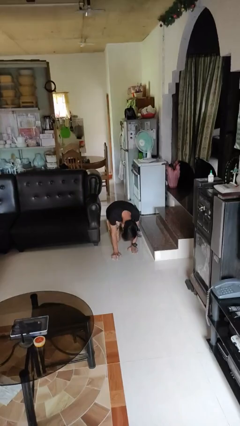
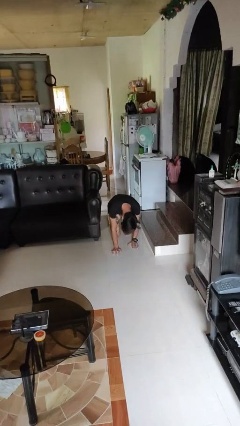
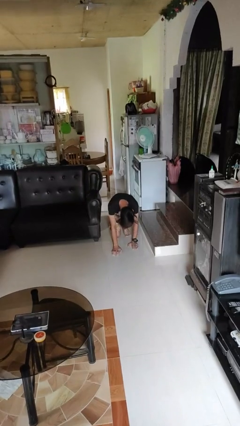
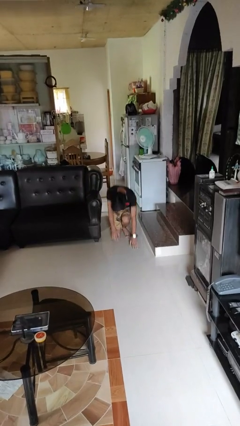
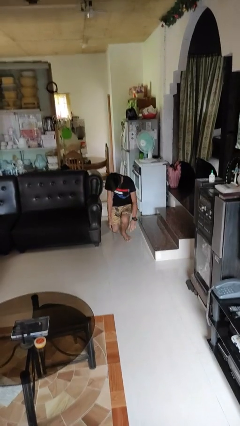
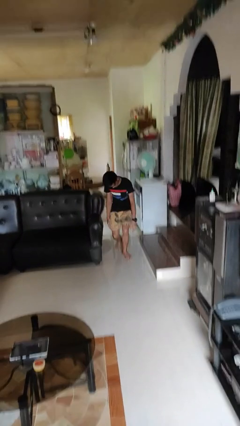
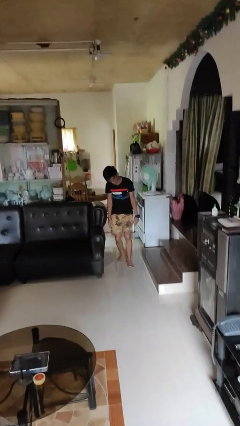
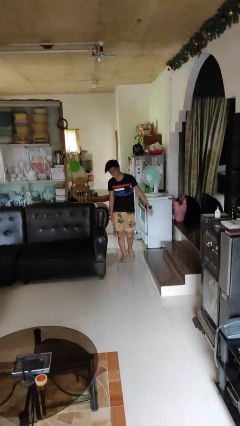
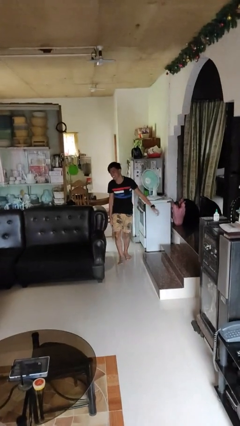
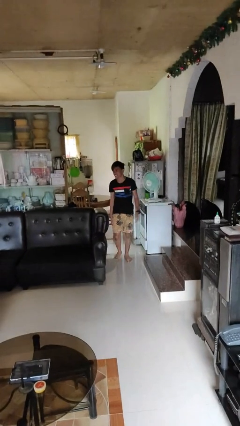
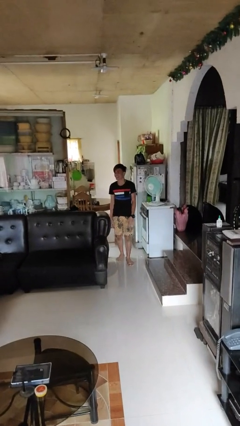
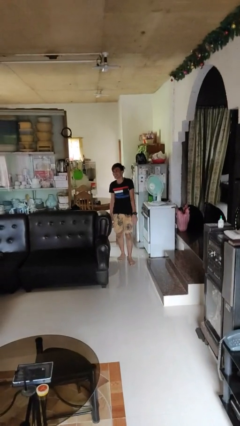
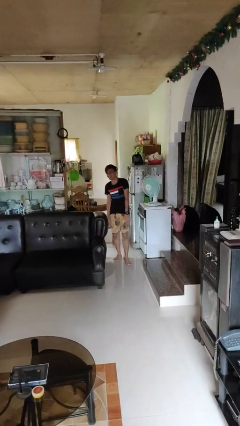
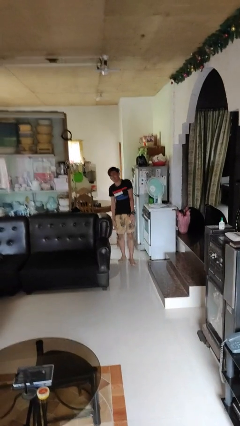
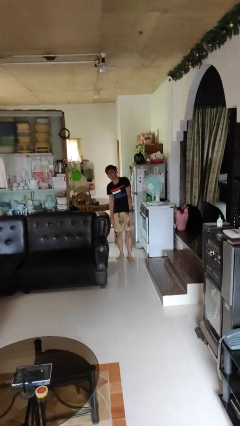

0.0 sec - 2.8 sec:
person stands up from floor

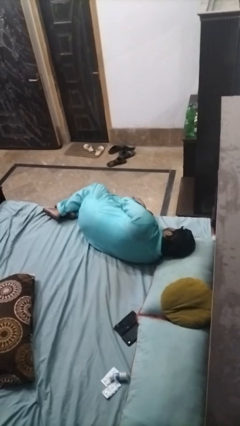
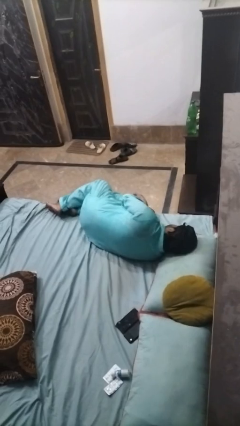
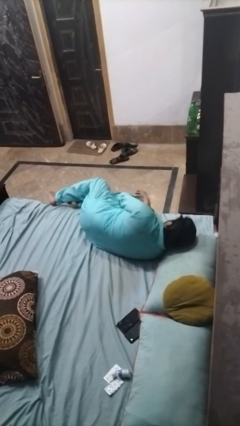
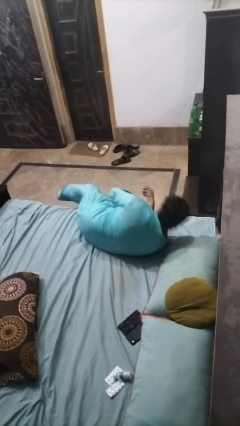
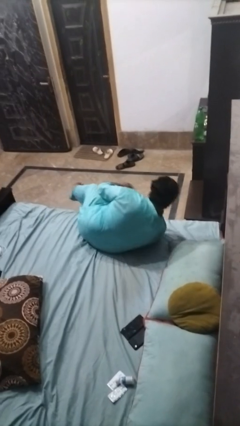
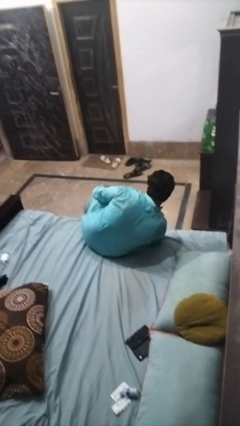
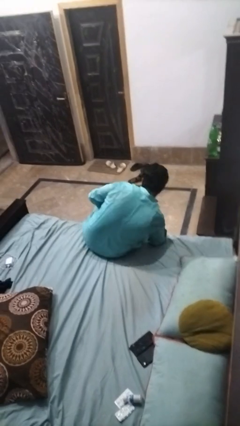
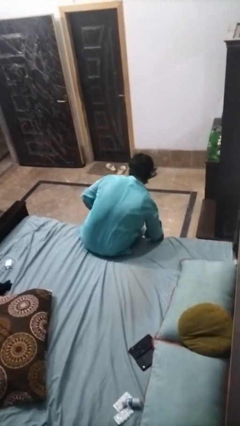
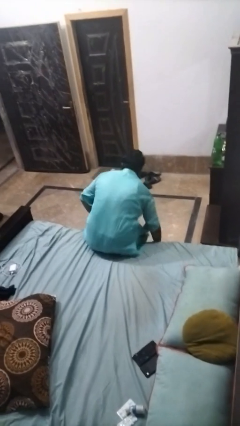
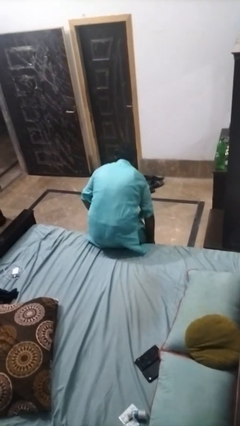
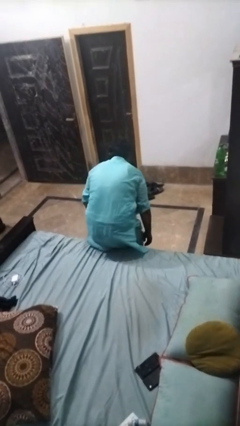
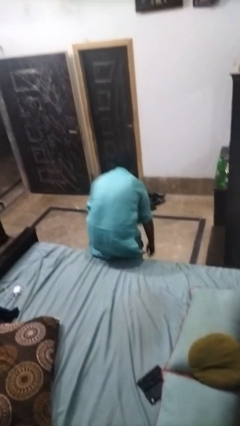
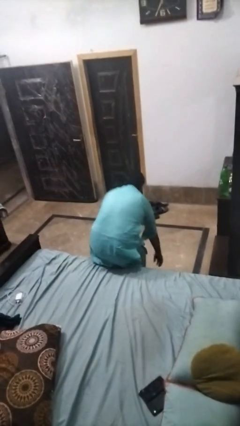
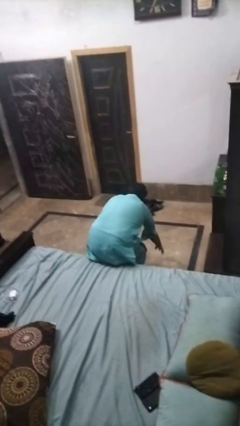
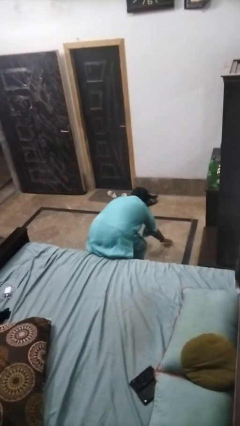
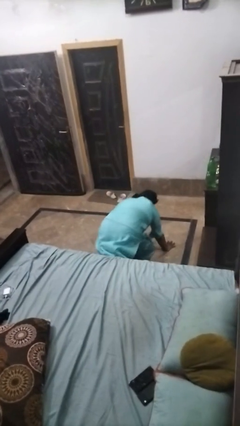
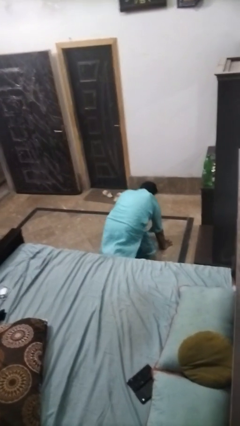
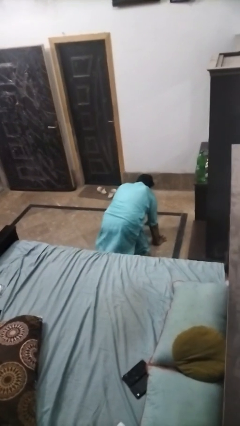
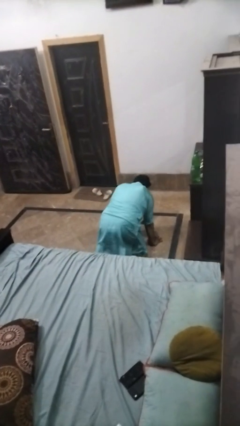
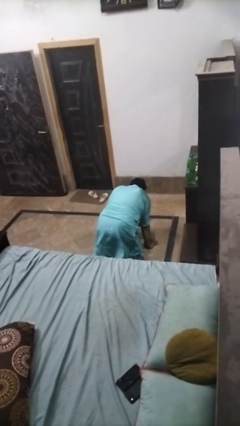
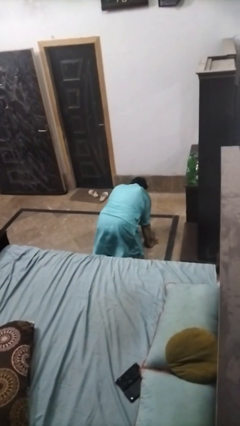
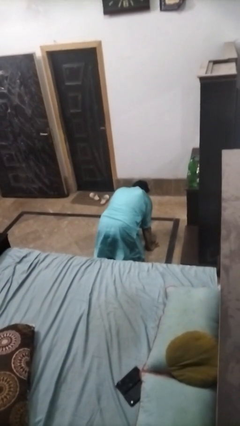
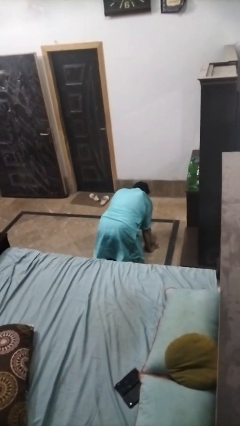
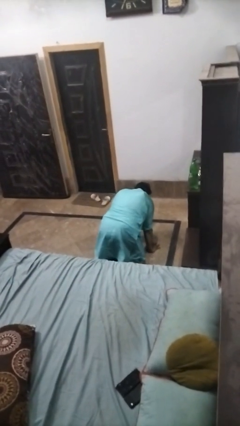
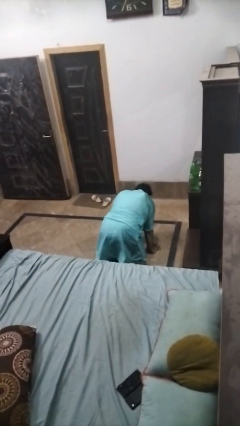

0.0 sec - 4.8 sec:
person falls from bed

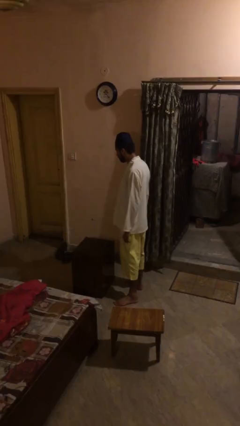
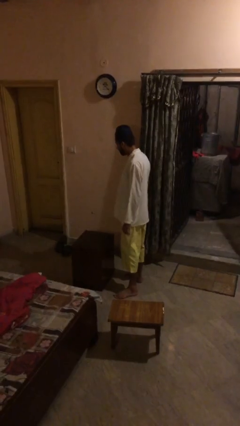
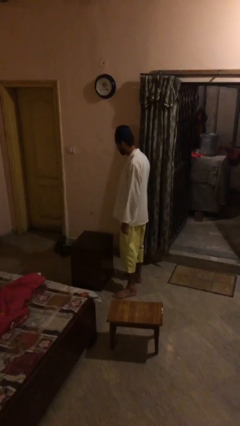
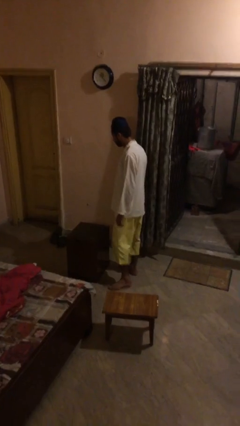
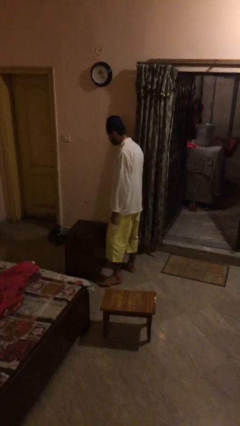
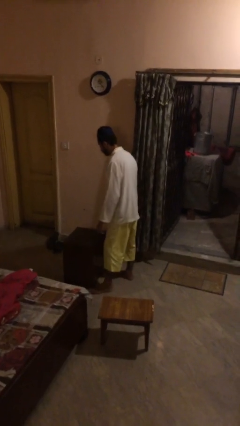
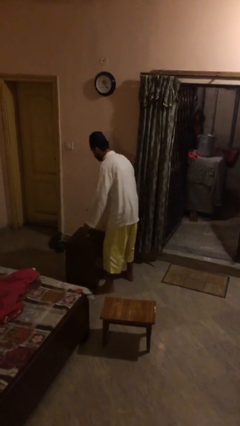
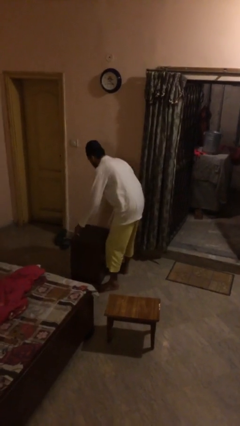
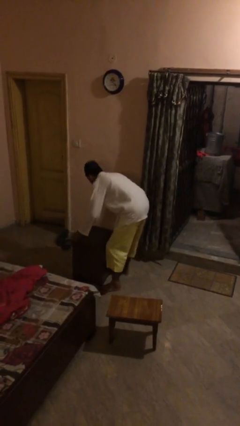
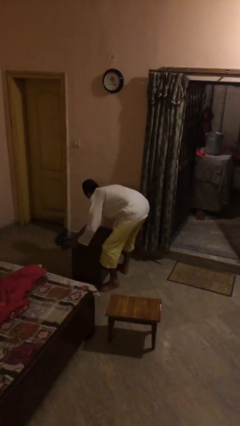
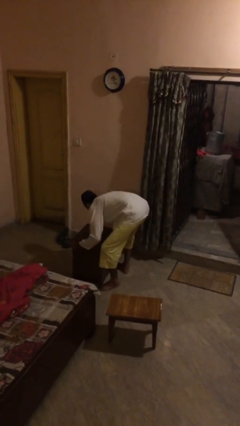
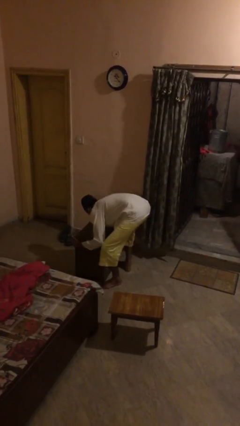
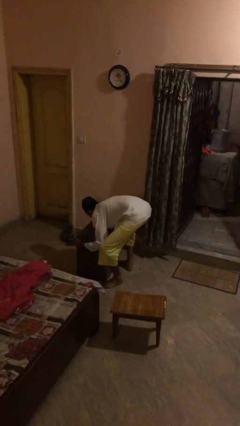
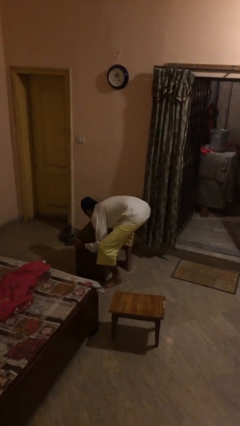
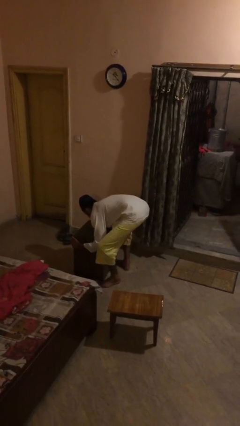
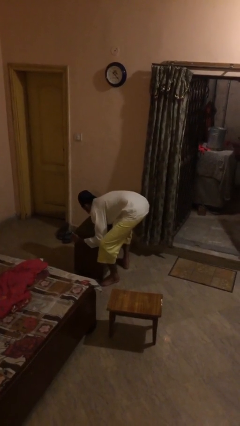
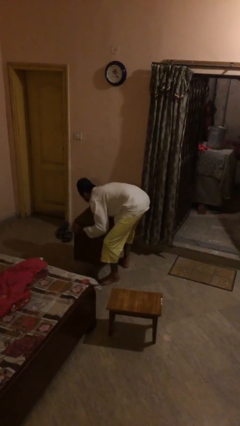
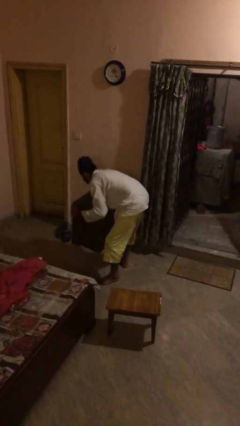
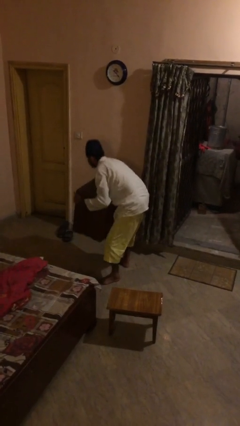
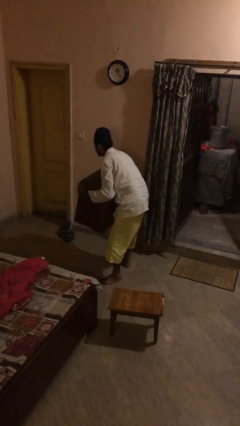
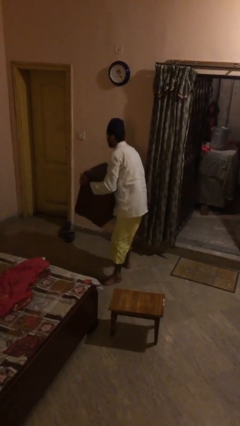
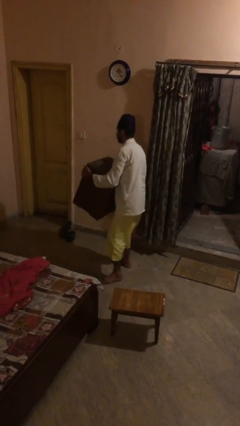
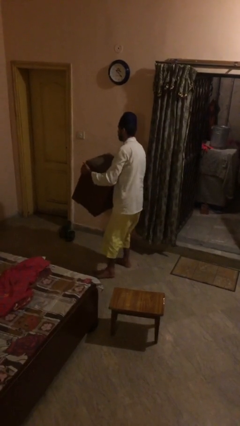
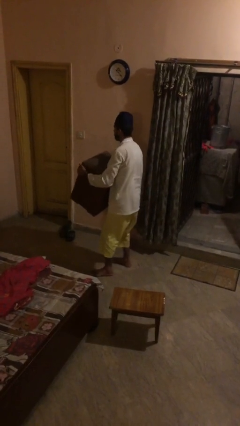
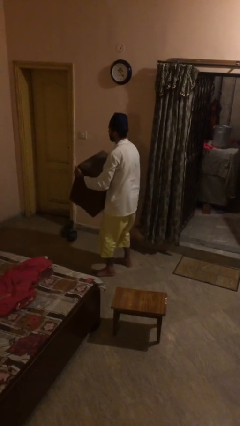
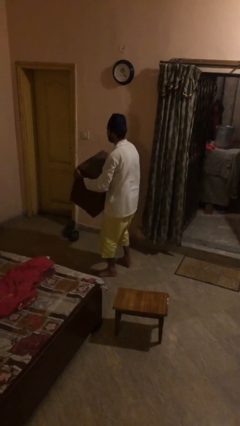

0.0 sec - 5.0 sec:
person picks up object from floor

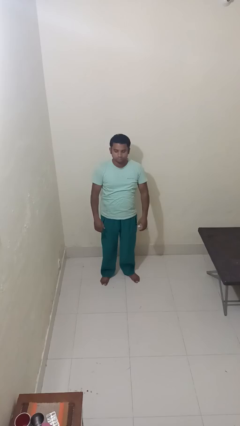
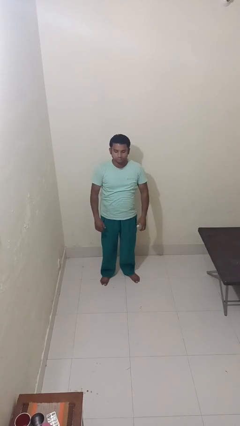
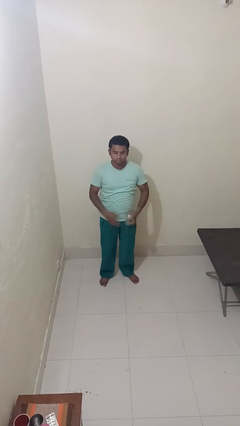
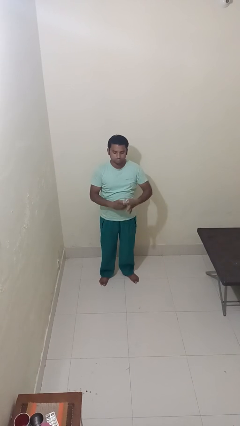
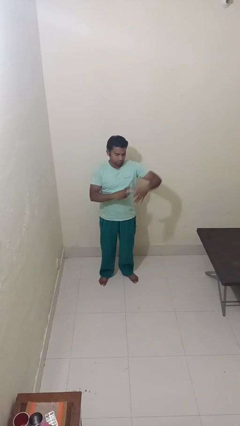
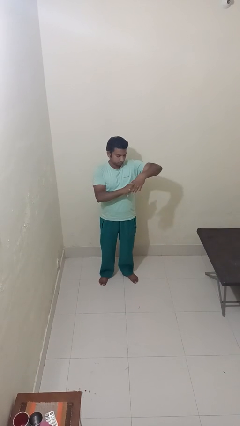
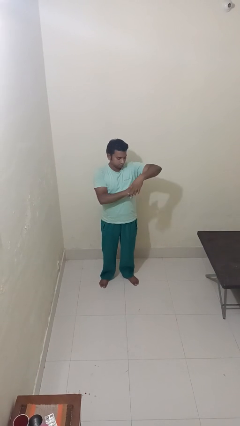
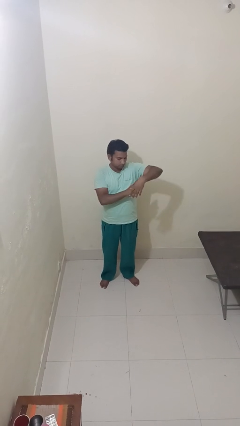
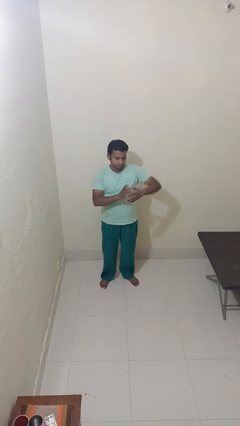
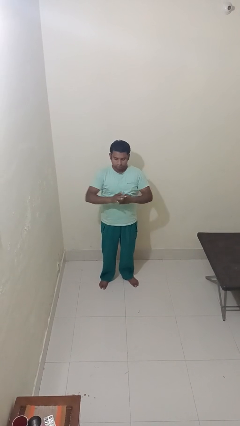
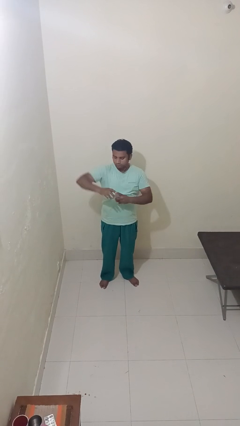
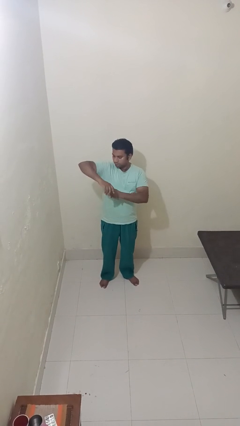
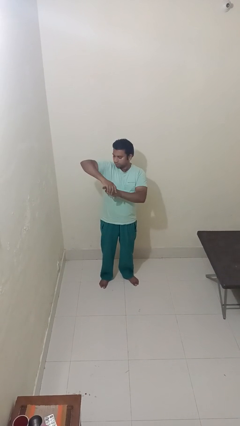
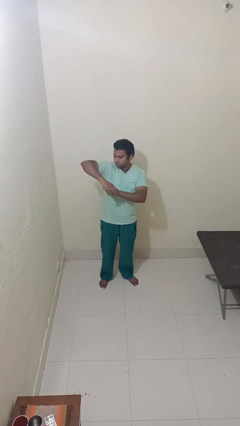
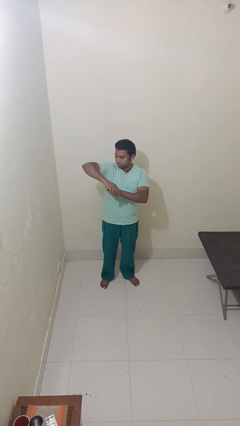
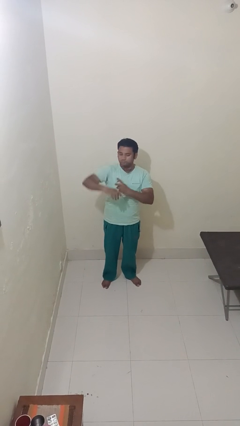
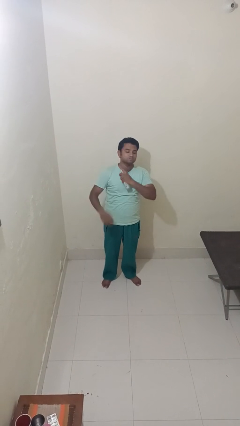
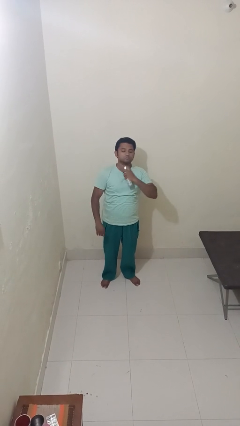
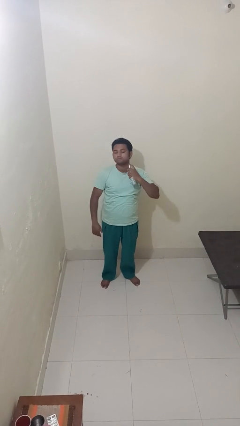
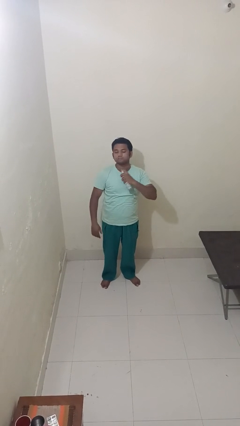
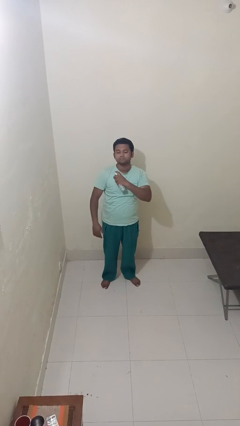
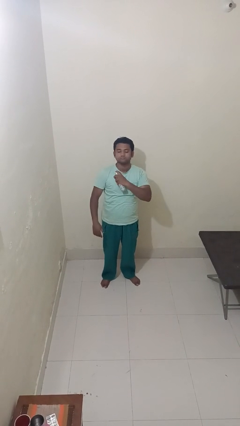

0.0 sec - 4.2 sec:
person applies deodorant

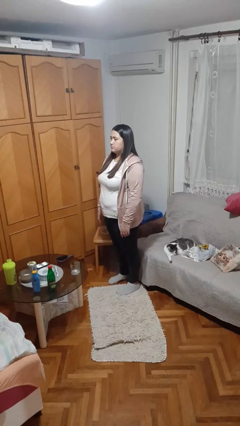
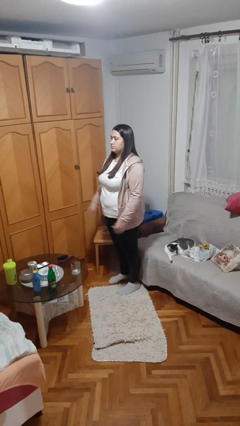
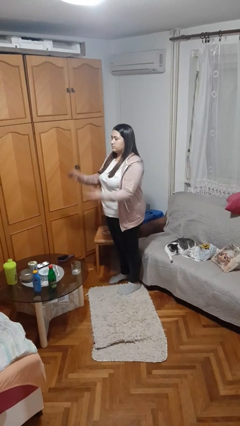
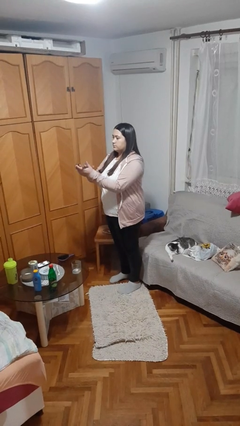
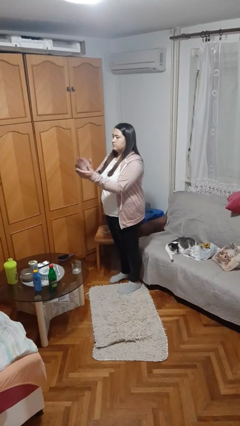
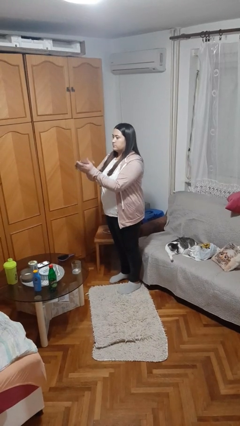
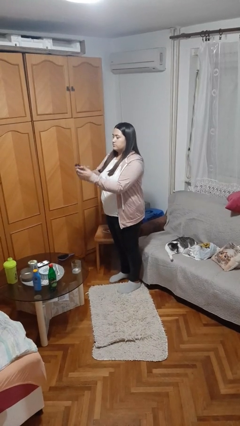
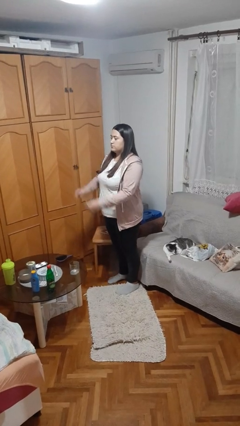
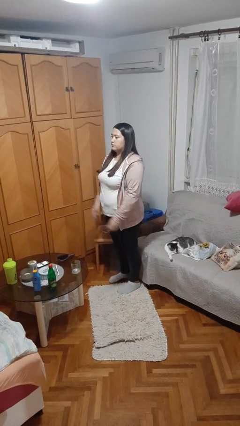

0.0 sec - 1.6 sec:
person claps hands
